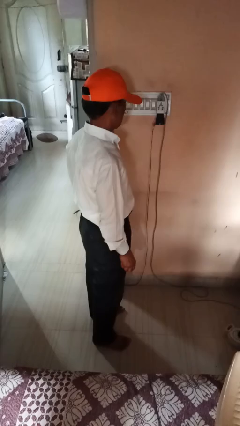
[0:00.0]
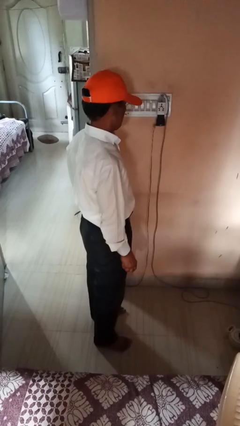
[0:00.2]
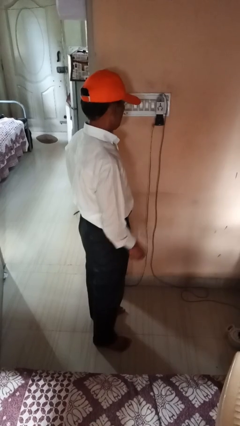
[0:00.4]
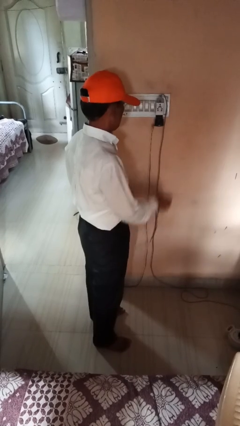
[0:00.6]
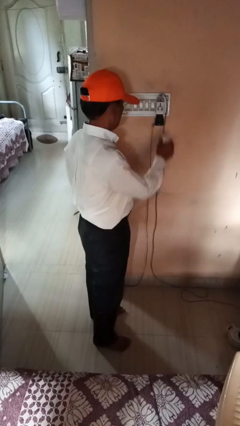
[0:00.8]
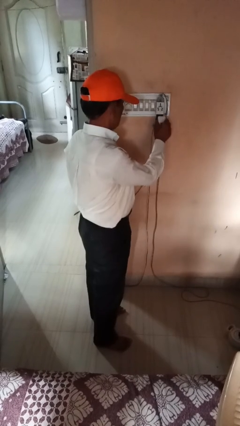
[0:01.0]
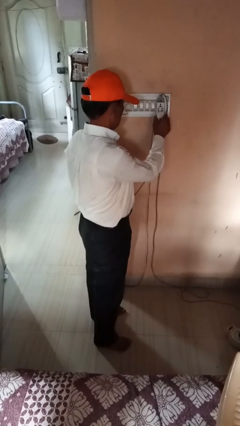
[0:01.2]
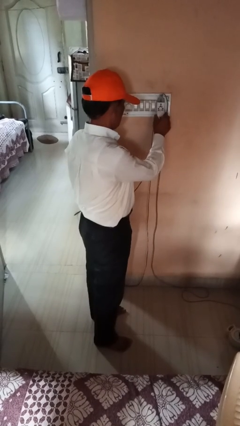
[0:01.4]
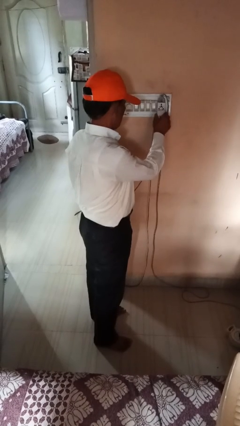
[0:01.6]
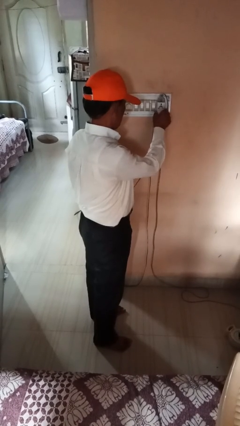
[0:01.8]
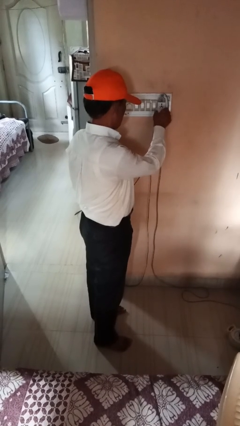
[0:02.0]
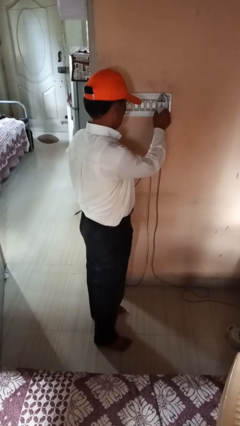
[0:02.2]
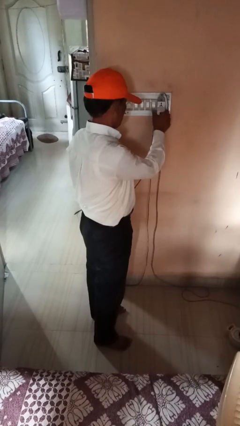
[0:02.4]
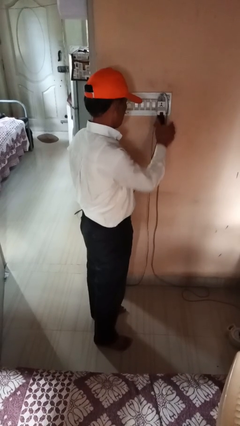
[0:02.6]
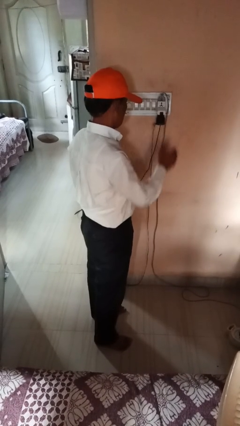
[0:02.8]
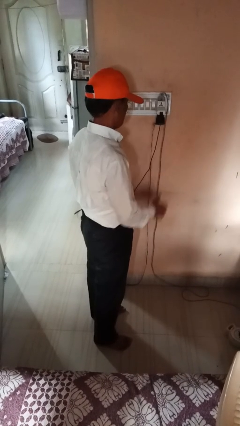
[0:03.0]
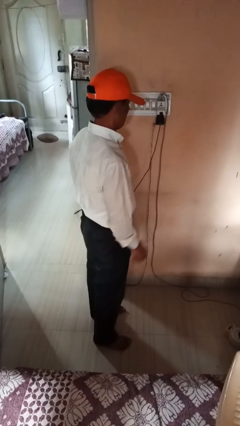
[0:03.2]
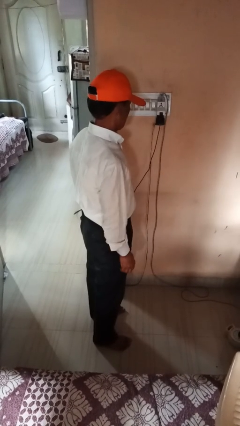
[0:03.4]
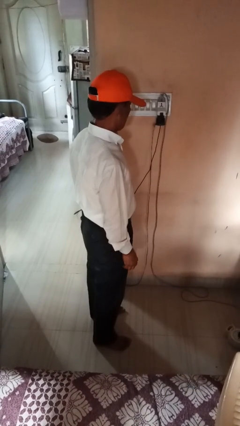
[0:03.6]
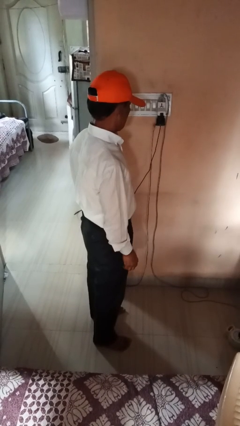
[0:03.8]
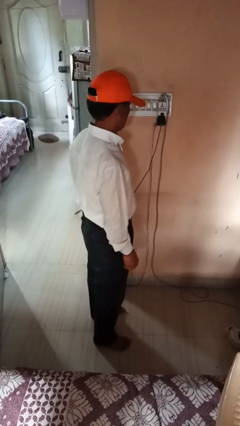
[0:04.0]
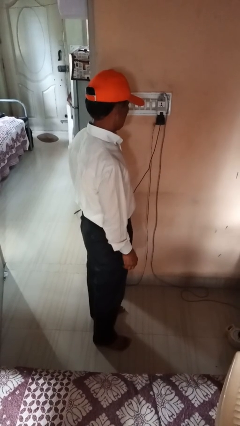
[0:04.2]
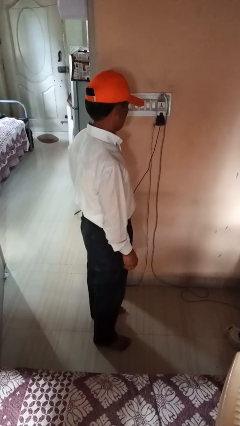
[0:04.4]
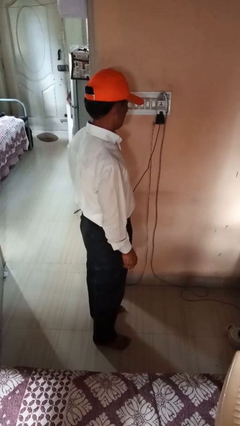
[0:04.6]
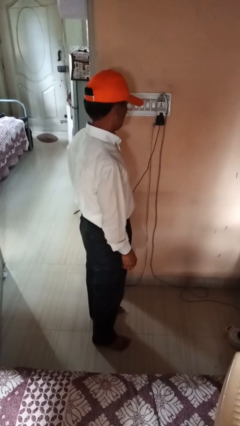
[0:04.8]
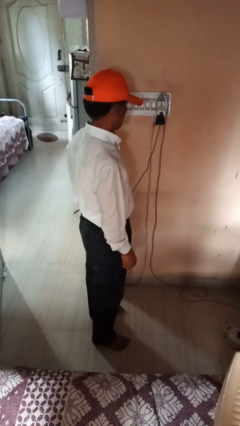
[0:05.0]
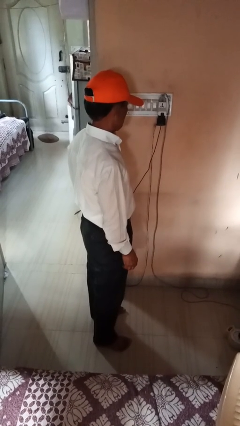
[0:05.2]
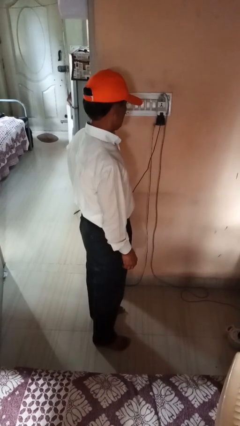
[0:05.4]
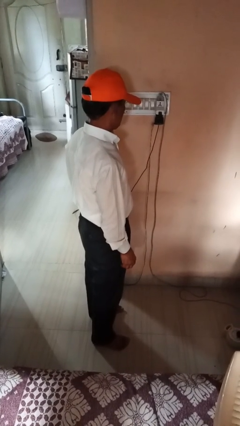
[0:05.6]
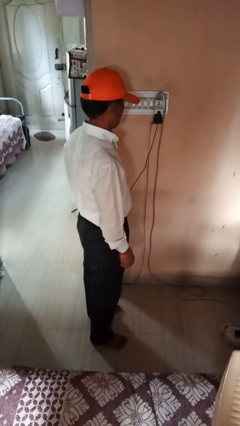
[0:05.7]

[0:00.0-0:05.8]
person plugs into electrical socket

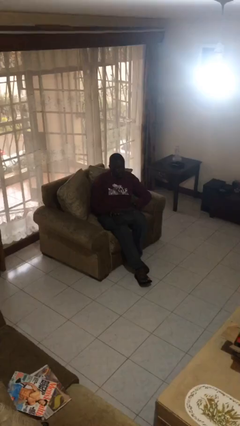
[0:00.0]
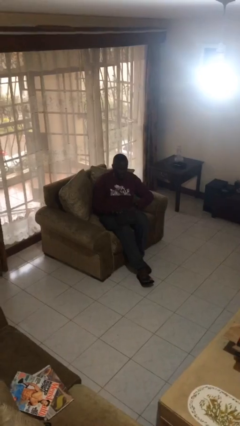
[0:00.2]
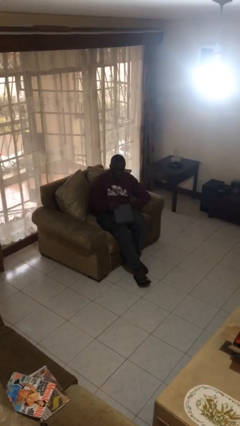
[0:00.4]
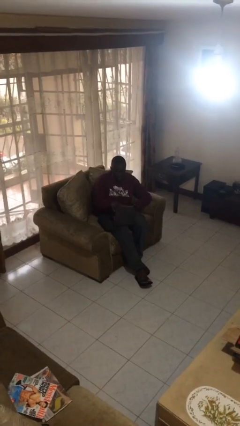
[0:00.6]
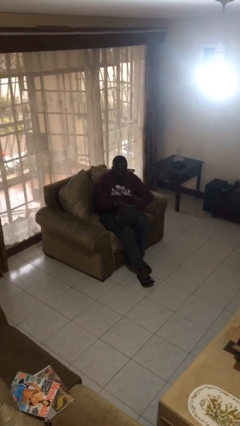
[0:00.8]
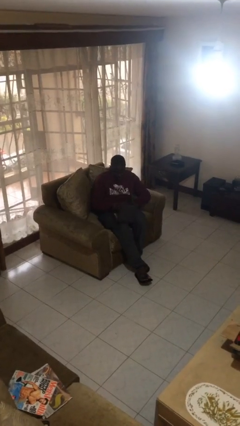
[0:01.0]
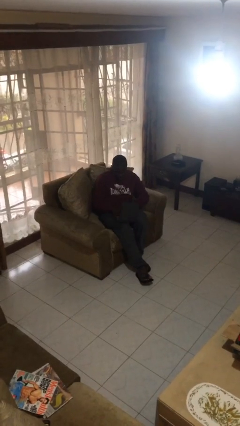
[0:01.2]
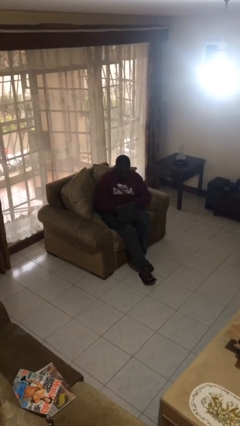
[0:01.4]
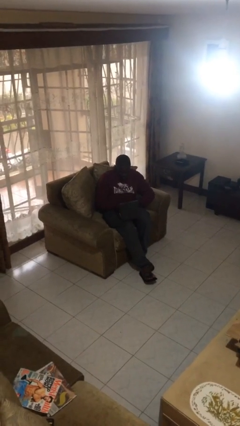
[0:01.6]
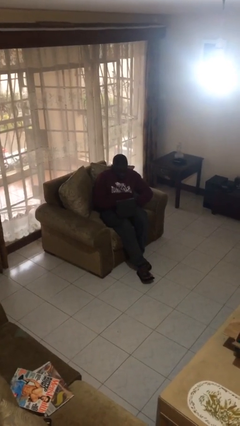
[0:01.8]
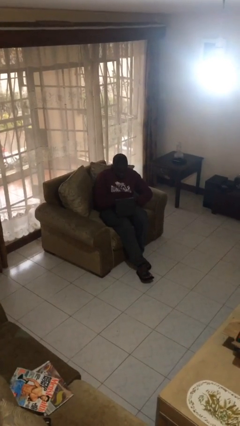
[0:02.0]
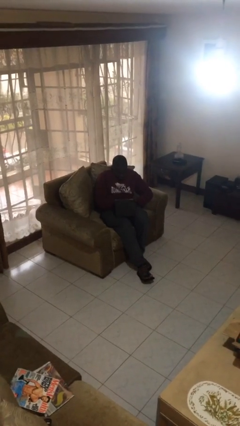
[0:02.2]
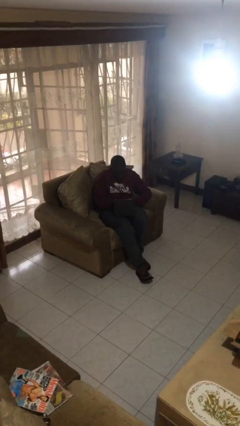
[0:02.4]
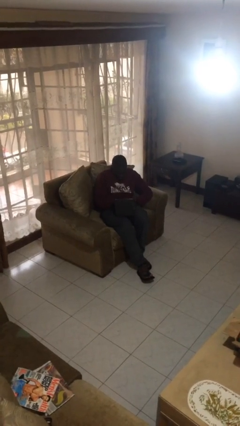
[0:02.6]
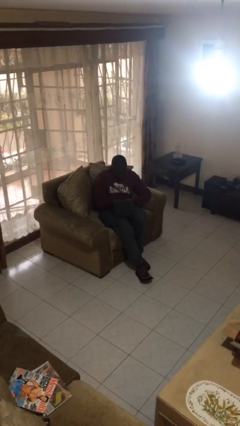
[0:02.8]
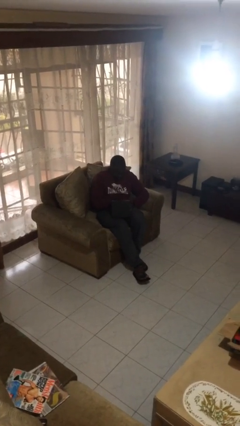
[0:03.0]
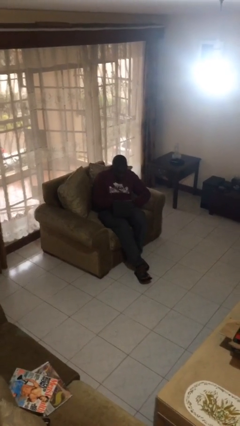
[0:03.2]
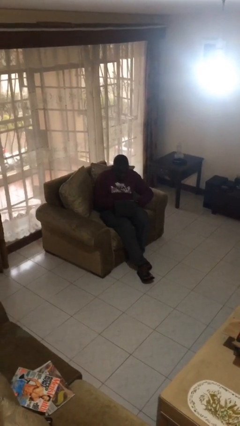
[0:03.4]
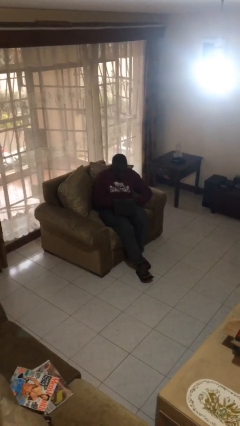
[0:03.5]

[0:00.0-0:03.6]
person opens jewelry box

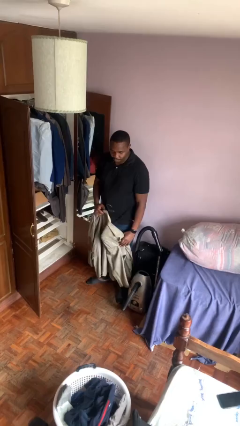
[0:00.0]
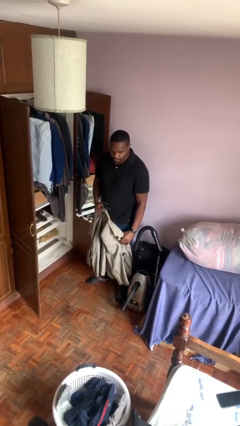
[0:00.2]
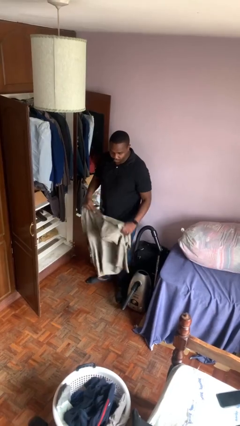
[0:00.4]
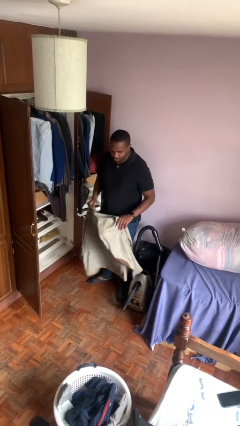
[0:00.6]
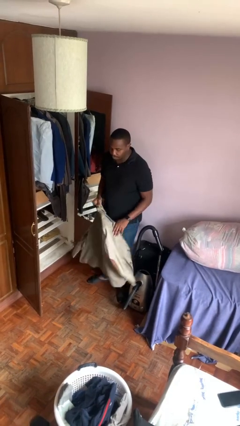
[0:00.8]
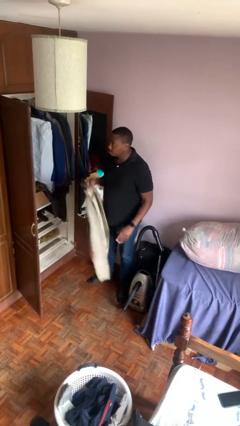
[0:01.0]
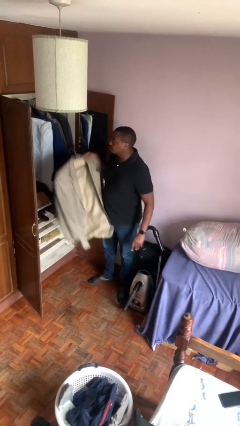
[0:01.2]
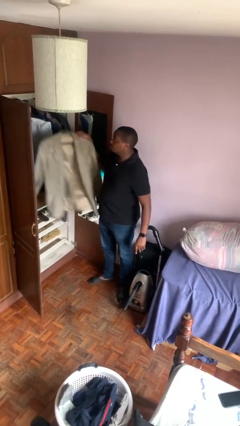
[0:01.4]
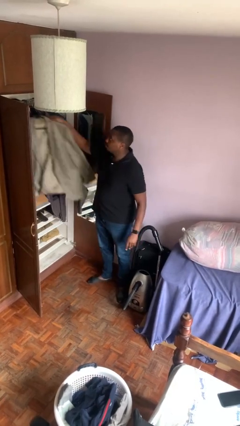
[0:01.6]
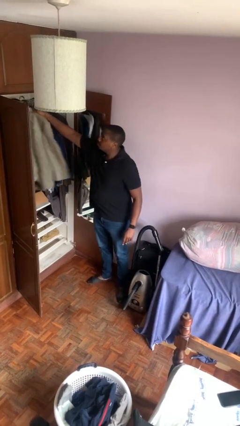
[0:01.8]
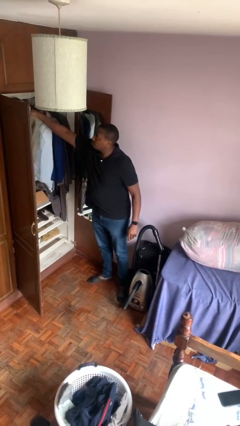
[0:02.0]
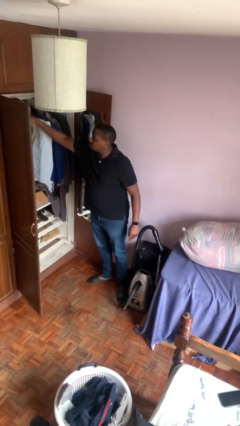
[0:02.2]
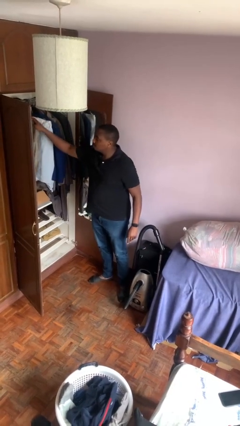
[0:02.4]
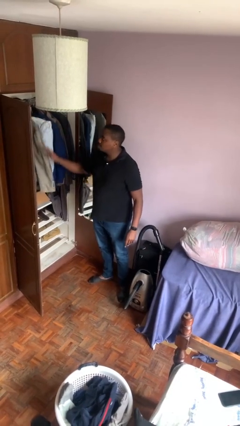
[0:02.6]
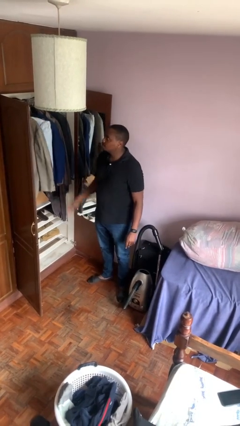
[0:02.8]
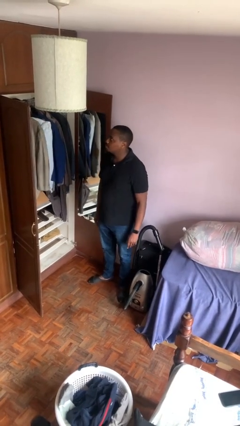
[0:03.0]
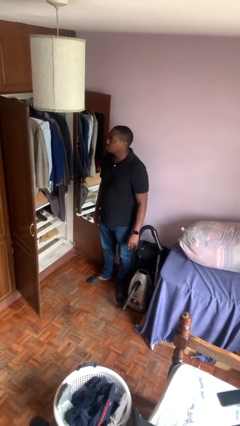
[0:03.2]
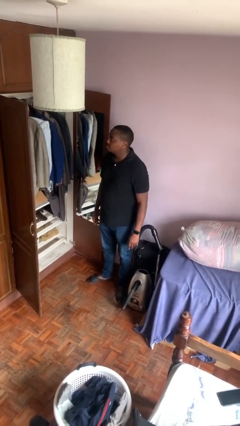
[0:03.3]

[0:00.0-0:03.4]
person puts clothes into closet

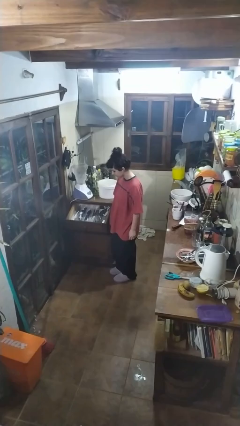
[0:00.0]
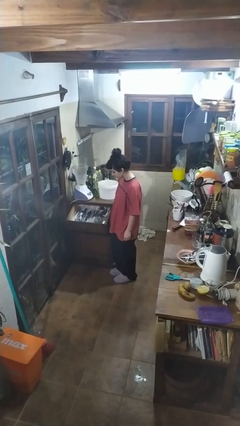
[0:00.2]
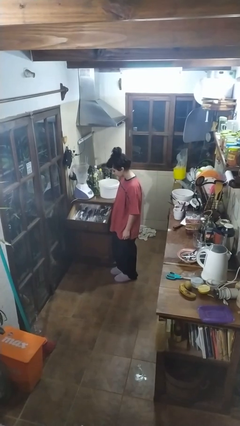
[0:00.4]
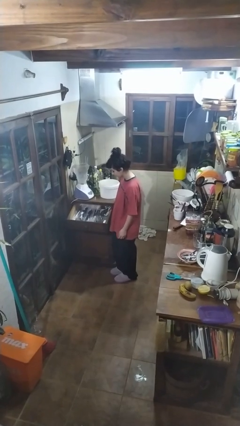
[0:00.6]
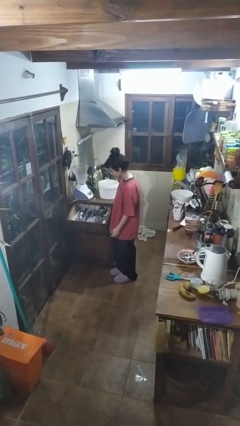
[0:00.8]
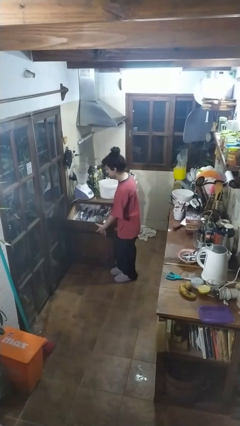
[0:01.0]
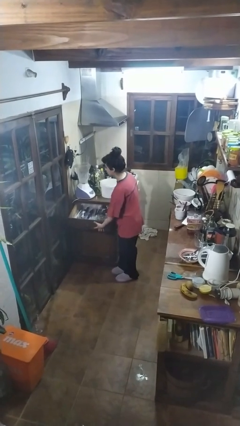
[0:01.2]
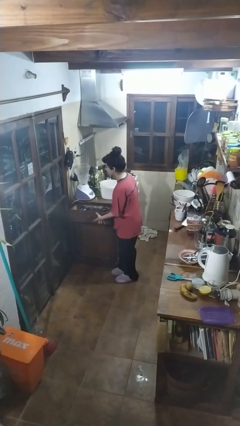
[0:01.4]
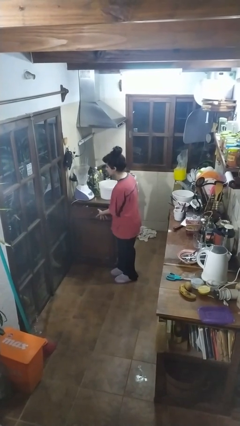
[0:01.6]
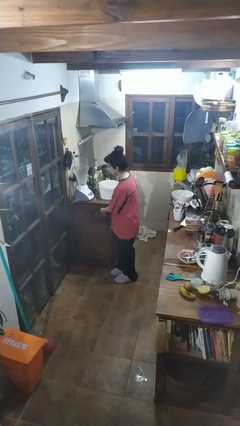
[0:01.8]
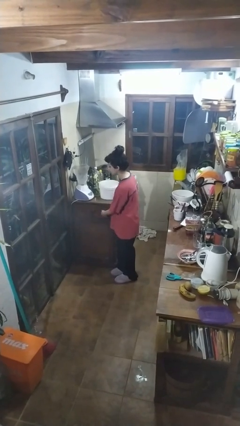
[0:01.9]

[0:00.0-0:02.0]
person closes kitchen drawer

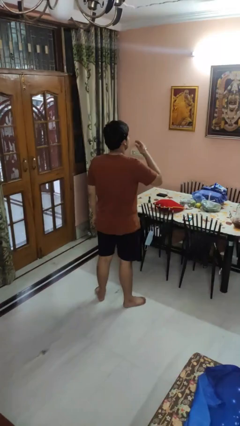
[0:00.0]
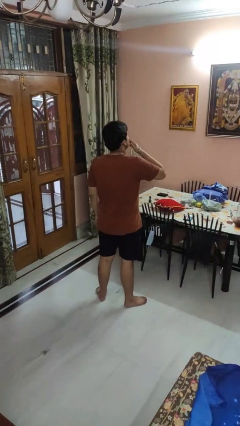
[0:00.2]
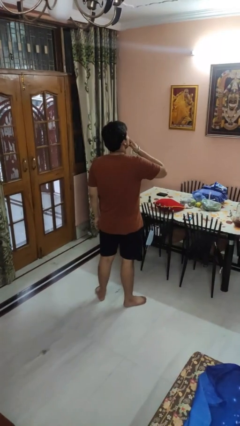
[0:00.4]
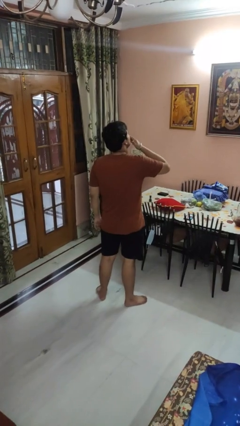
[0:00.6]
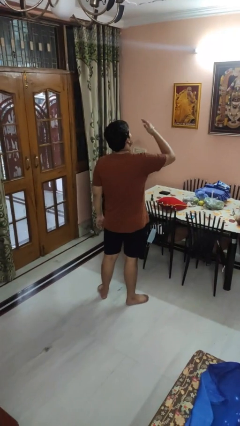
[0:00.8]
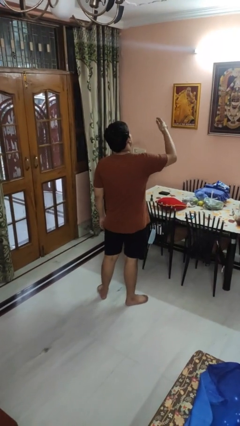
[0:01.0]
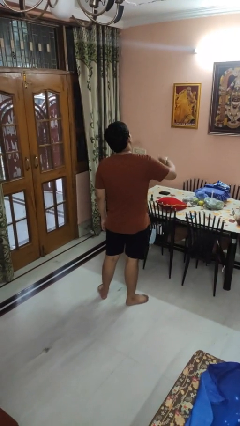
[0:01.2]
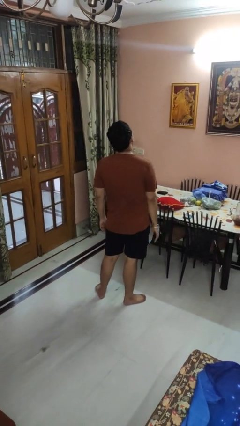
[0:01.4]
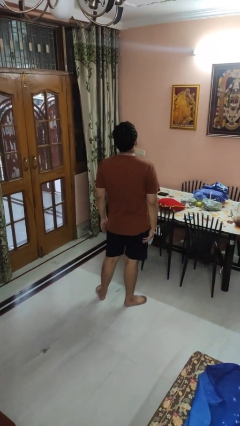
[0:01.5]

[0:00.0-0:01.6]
person gestures blow kiss

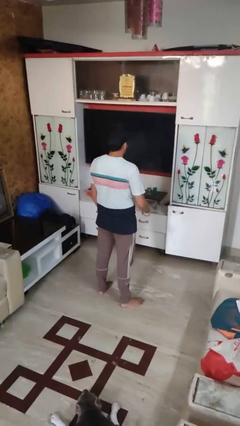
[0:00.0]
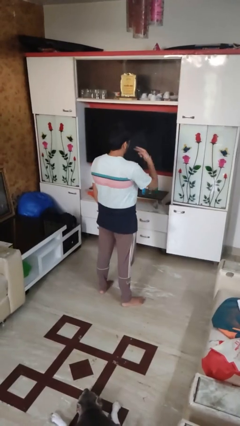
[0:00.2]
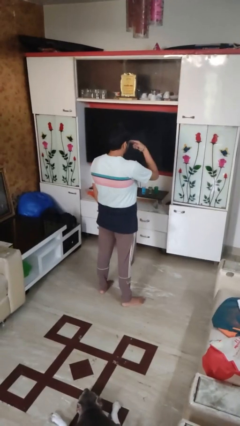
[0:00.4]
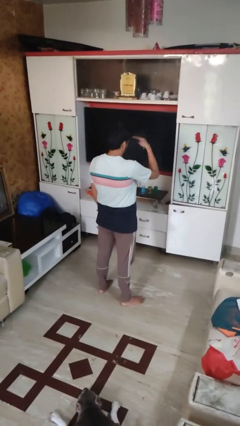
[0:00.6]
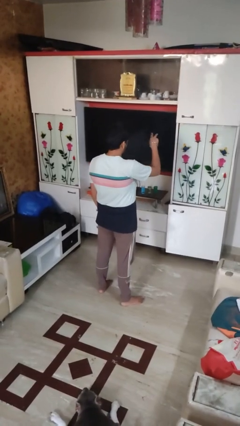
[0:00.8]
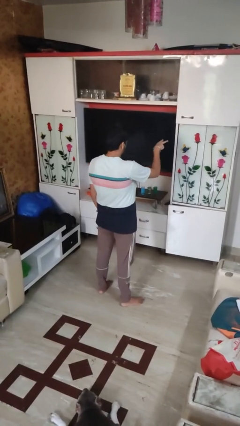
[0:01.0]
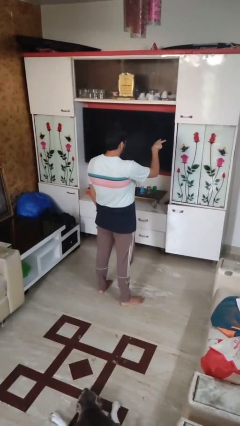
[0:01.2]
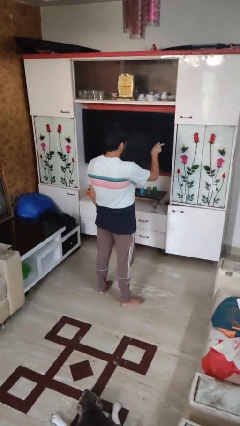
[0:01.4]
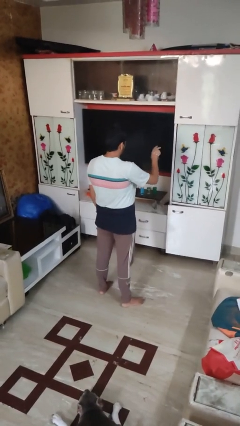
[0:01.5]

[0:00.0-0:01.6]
person gestures watch closely
